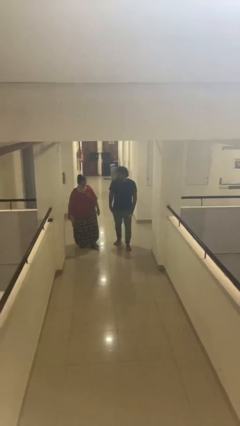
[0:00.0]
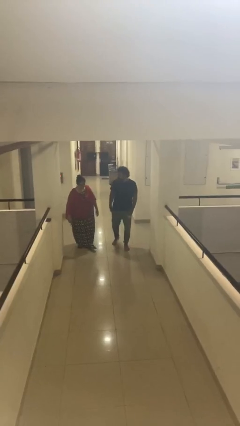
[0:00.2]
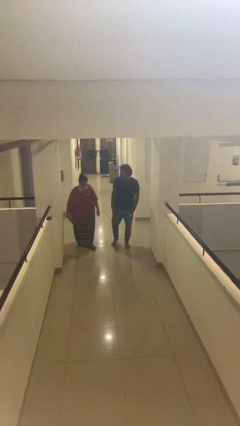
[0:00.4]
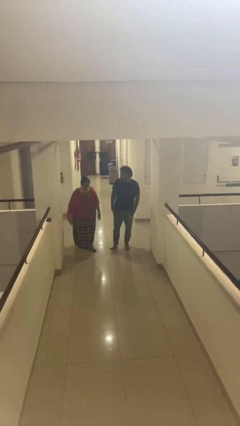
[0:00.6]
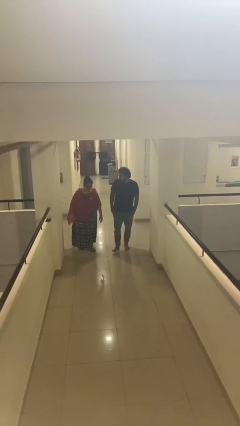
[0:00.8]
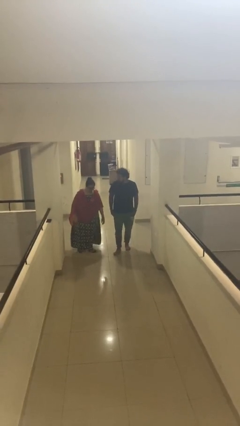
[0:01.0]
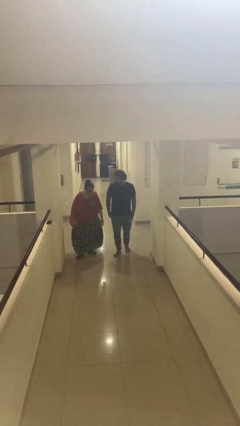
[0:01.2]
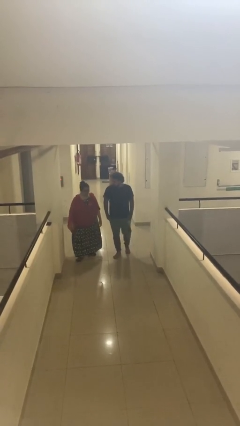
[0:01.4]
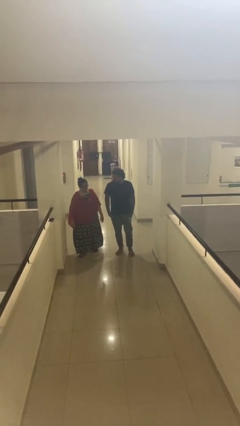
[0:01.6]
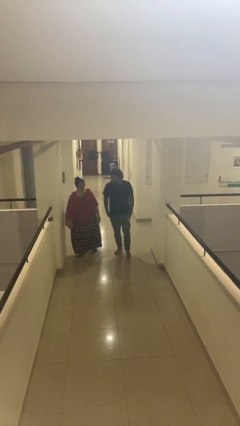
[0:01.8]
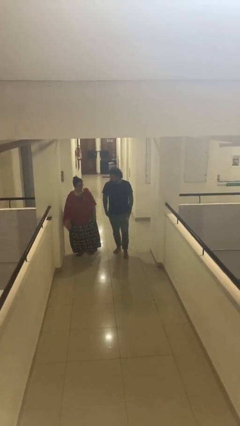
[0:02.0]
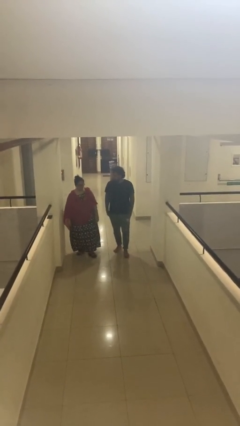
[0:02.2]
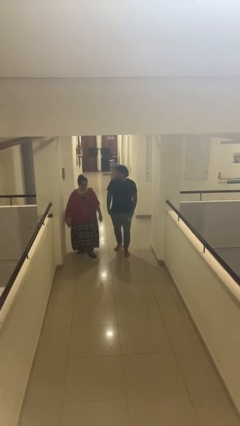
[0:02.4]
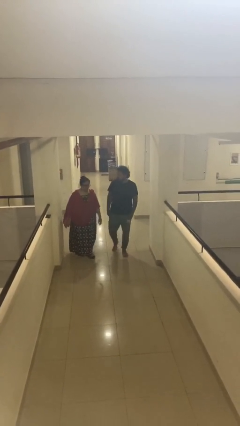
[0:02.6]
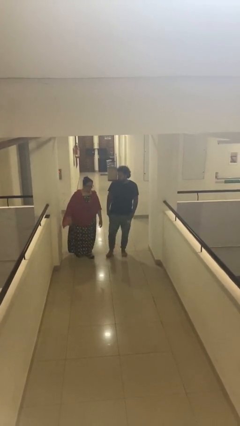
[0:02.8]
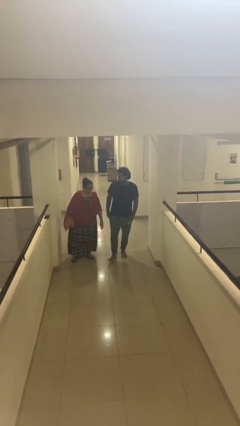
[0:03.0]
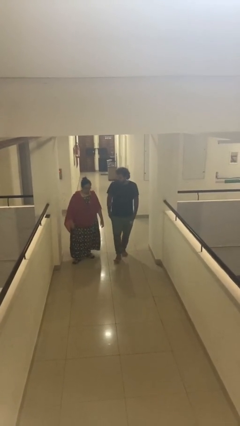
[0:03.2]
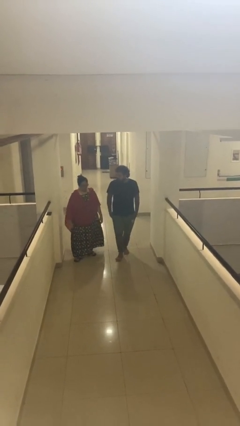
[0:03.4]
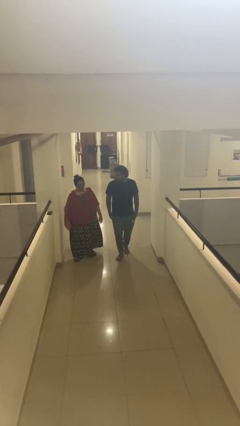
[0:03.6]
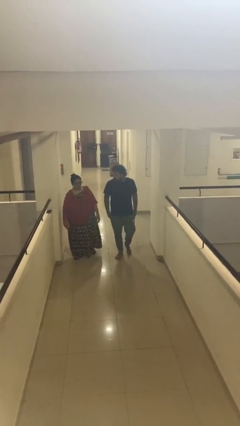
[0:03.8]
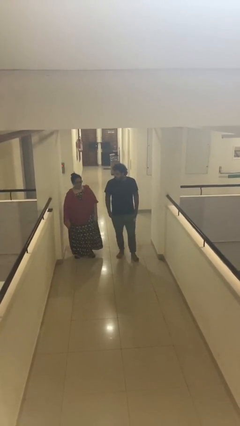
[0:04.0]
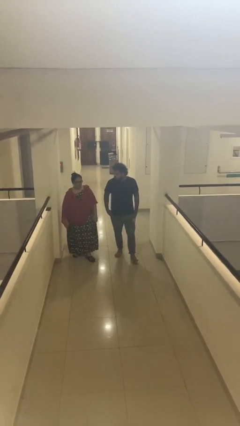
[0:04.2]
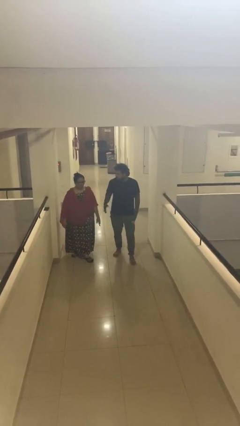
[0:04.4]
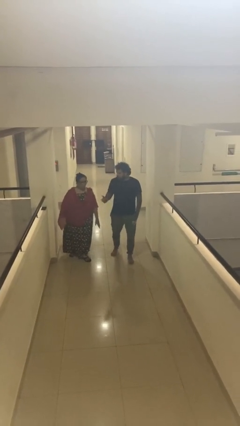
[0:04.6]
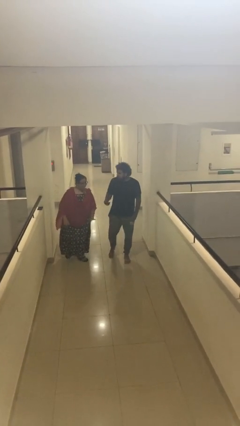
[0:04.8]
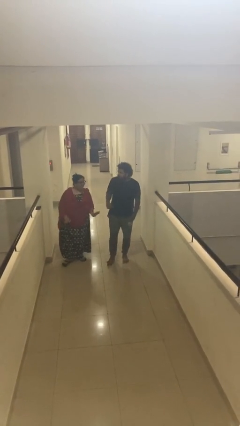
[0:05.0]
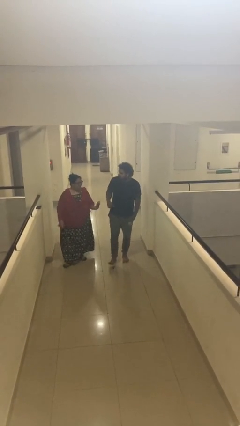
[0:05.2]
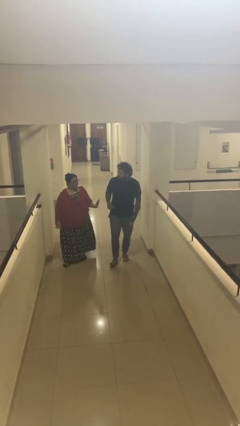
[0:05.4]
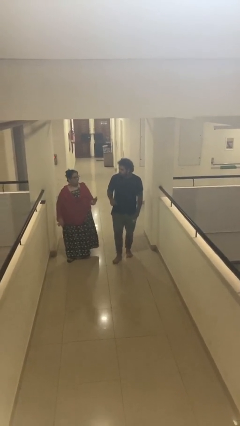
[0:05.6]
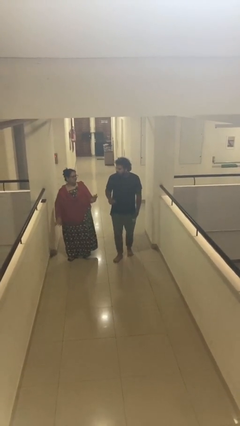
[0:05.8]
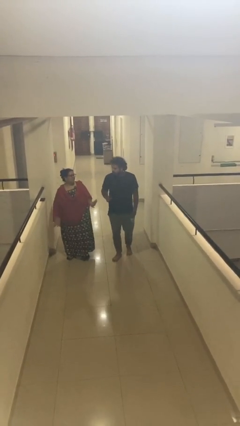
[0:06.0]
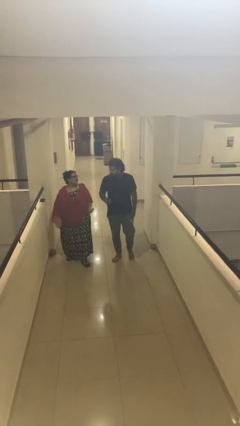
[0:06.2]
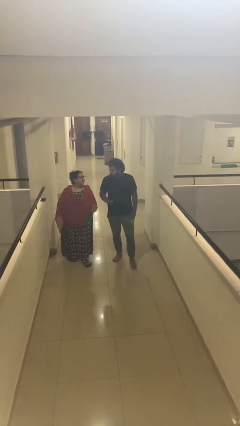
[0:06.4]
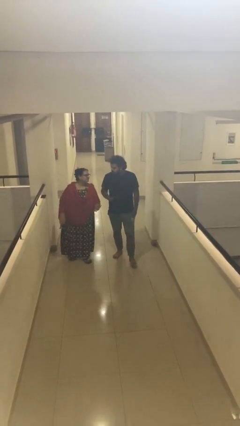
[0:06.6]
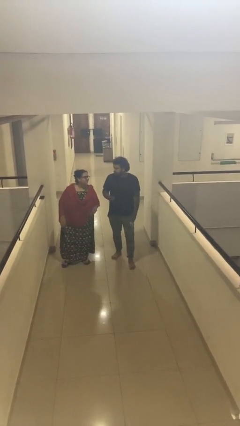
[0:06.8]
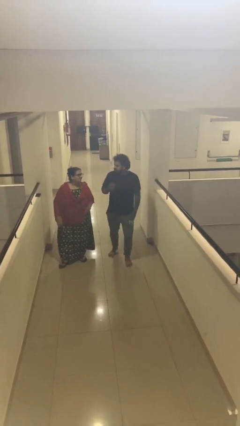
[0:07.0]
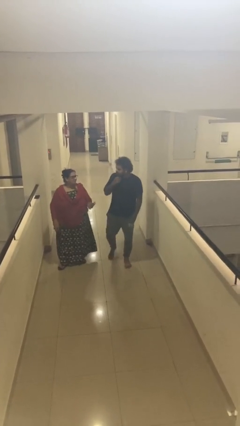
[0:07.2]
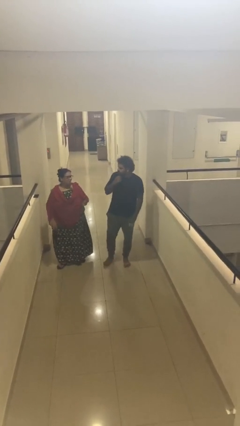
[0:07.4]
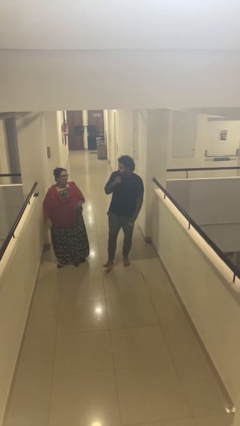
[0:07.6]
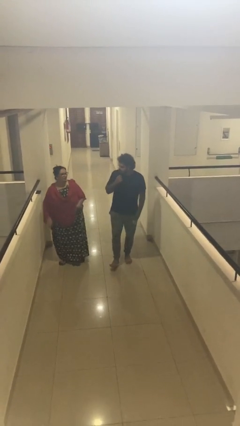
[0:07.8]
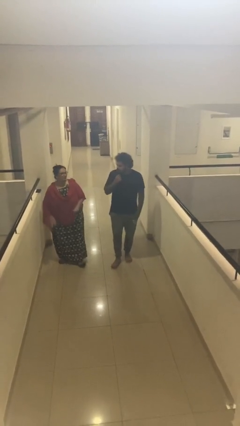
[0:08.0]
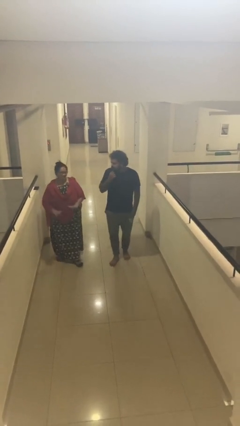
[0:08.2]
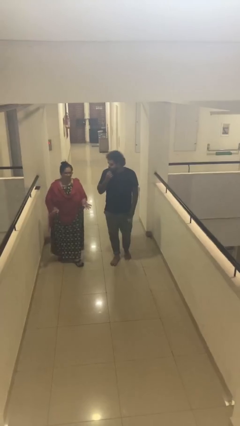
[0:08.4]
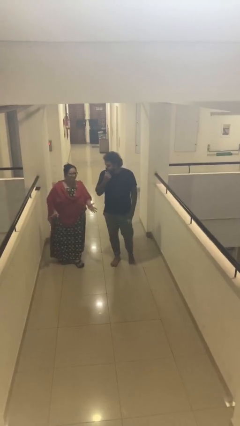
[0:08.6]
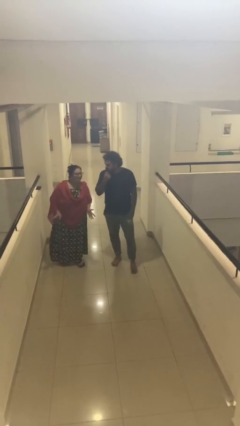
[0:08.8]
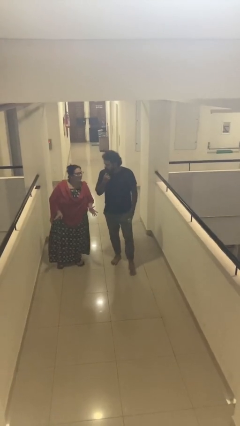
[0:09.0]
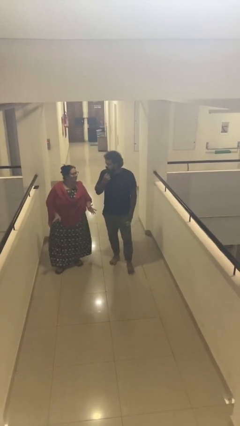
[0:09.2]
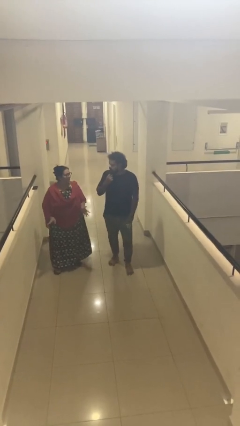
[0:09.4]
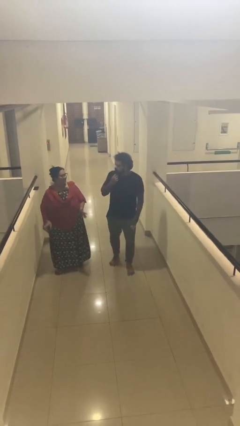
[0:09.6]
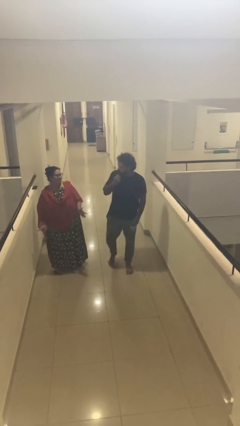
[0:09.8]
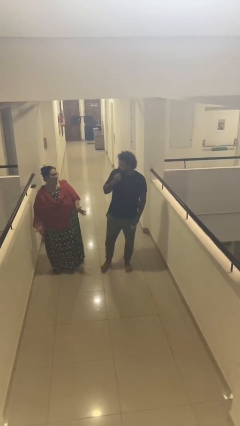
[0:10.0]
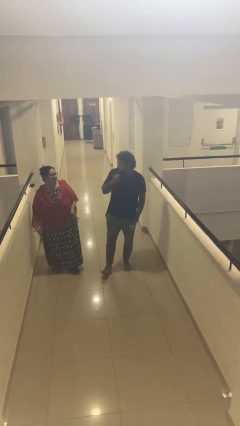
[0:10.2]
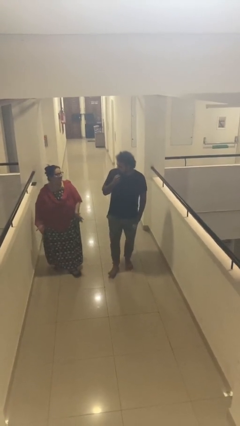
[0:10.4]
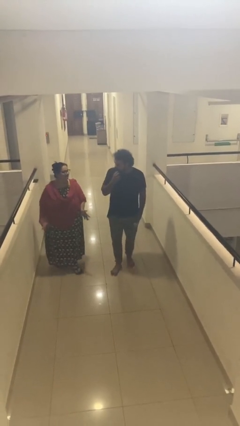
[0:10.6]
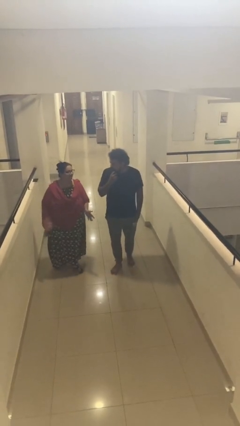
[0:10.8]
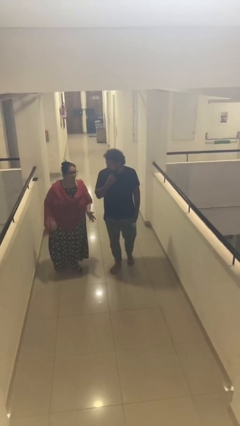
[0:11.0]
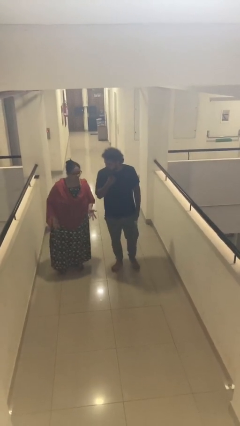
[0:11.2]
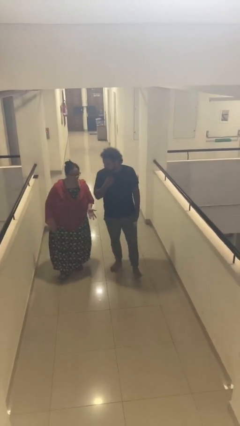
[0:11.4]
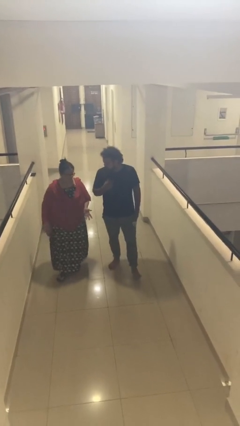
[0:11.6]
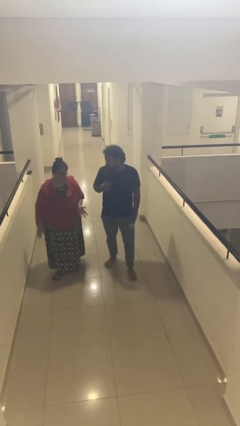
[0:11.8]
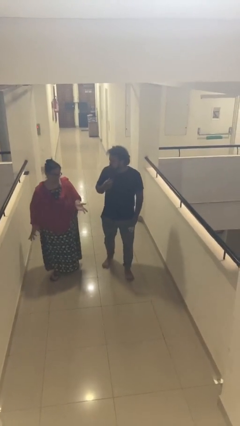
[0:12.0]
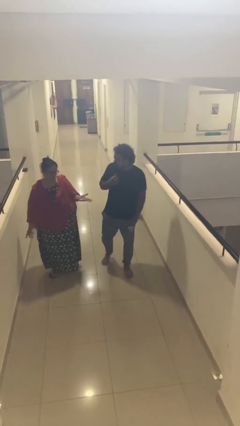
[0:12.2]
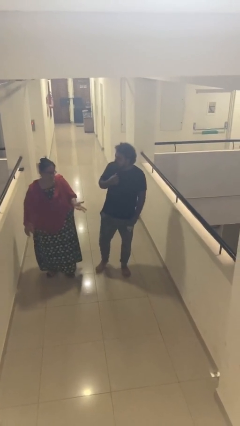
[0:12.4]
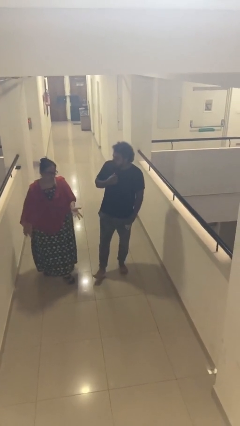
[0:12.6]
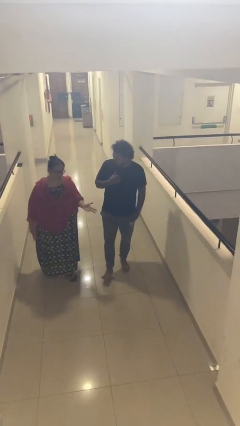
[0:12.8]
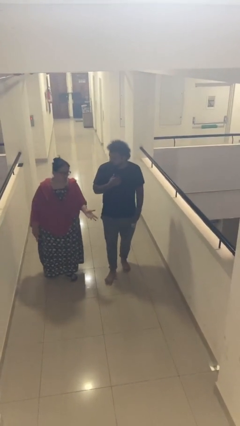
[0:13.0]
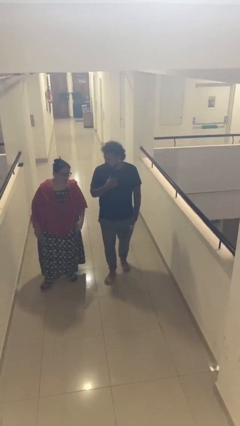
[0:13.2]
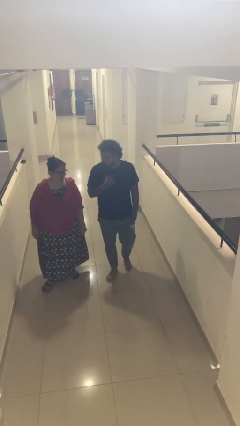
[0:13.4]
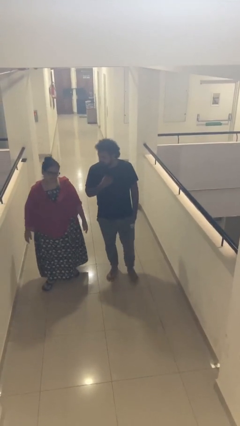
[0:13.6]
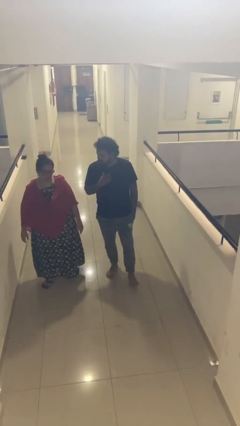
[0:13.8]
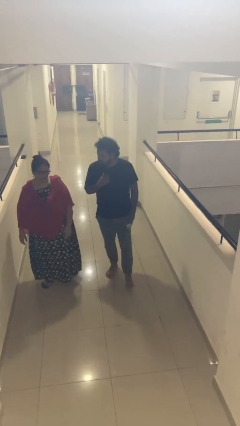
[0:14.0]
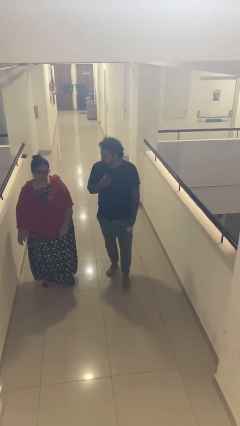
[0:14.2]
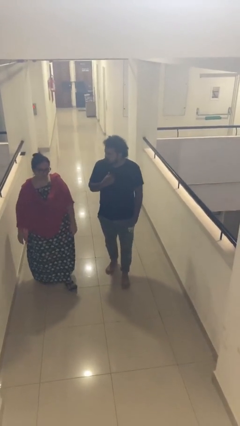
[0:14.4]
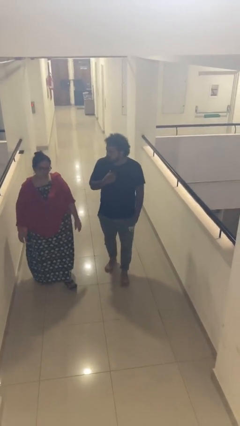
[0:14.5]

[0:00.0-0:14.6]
person talks to person

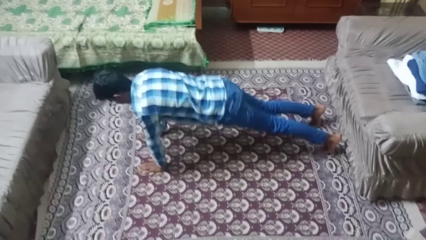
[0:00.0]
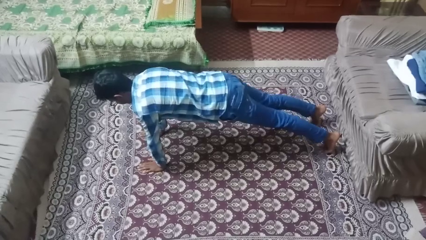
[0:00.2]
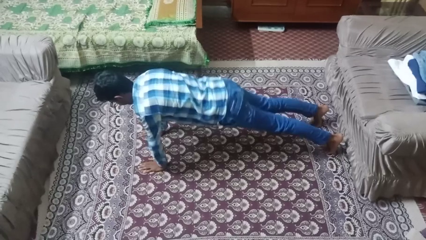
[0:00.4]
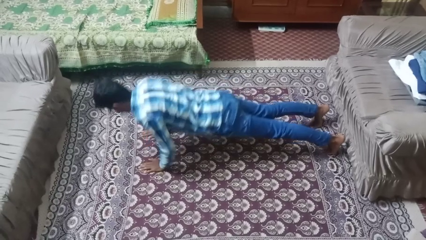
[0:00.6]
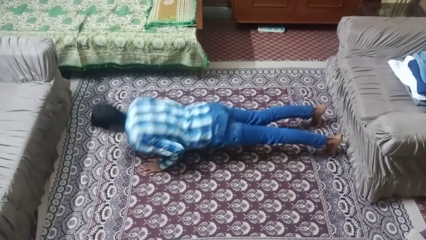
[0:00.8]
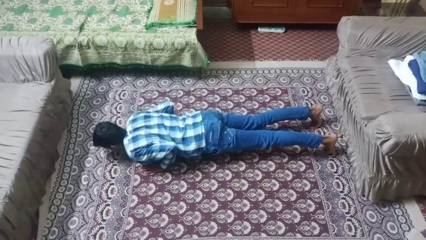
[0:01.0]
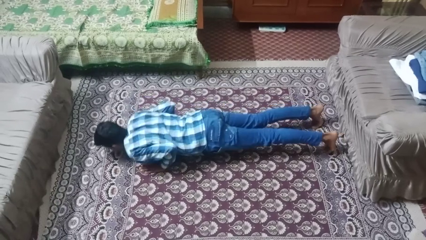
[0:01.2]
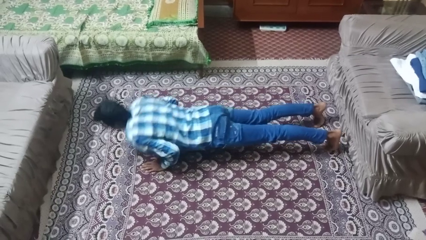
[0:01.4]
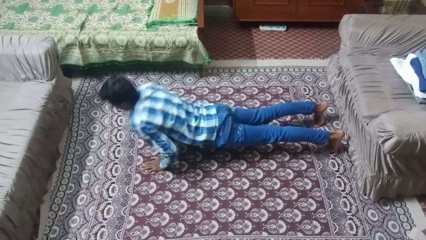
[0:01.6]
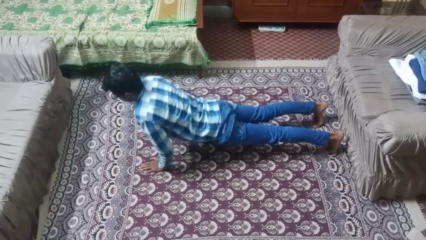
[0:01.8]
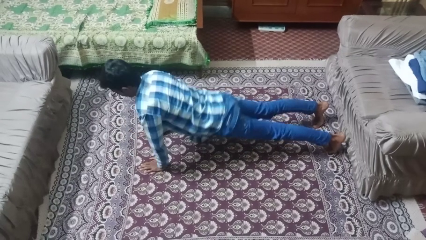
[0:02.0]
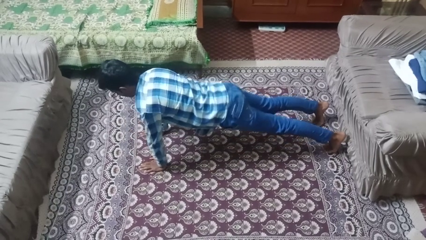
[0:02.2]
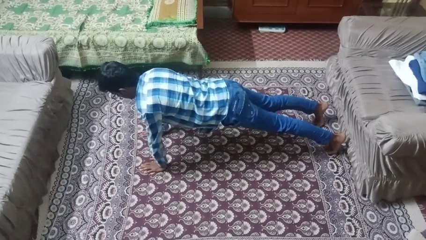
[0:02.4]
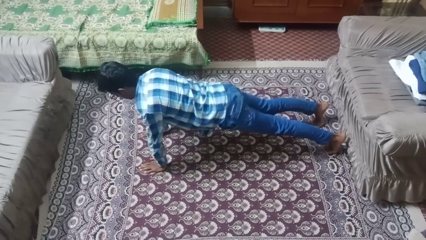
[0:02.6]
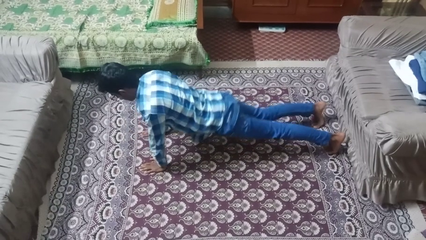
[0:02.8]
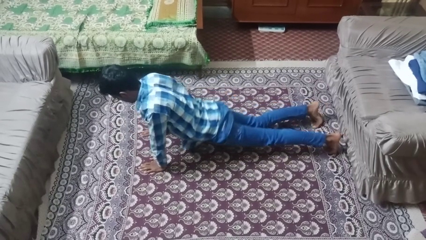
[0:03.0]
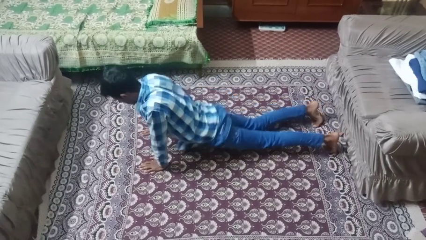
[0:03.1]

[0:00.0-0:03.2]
person exercises with pushup

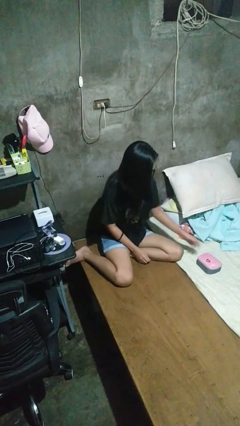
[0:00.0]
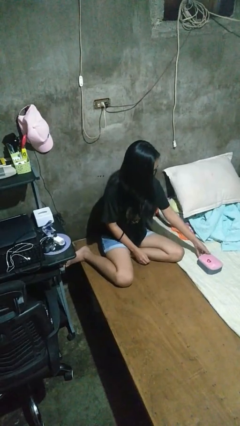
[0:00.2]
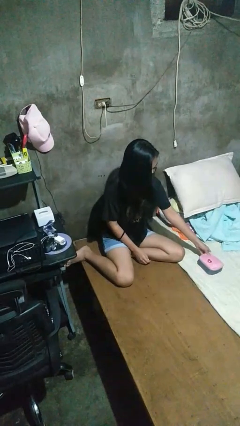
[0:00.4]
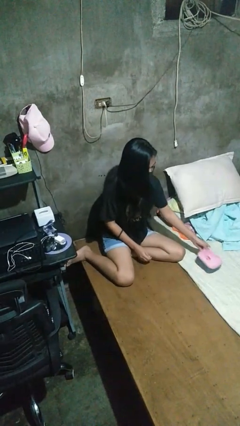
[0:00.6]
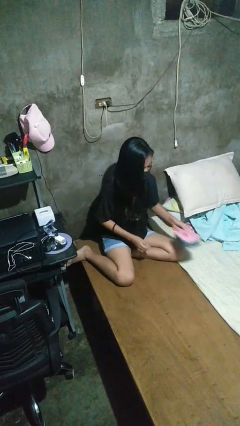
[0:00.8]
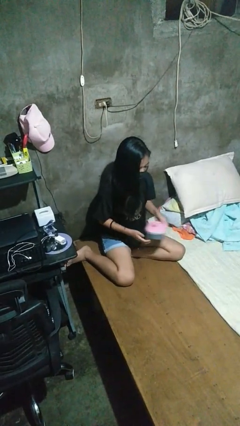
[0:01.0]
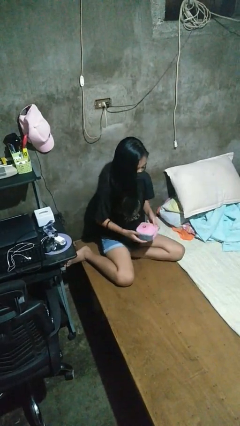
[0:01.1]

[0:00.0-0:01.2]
person picks up object from bed
